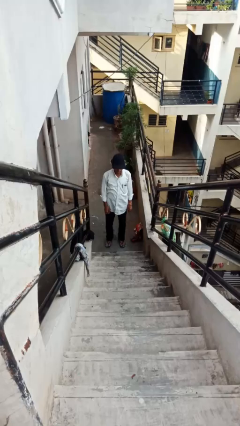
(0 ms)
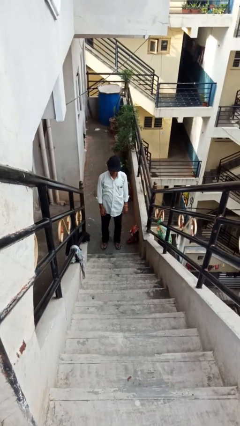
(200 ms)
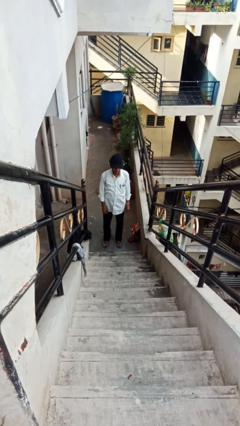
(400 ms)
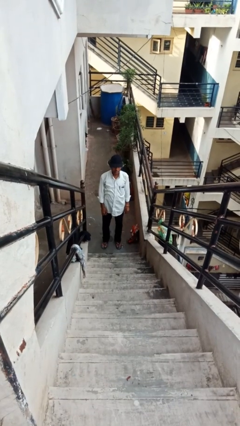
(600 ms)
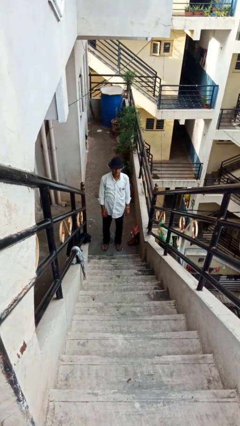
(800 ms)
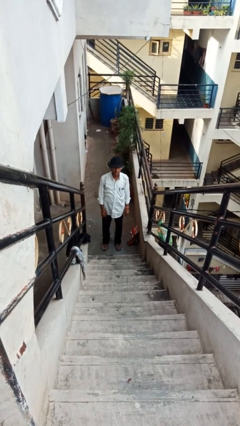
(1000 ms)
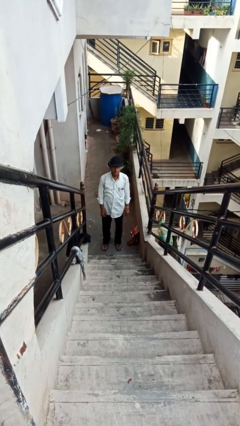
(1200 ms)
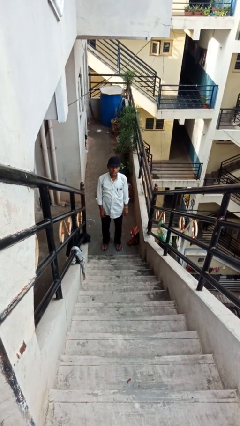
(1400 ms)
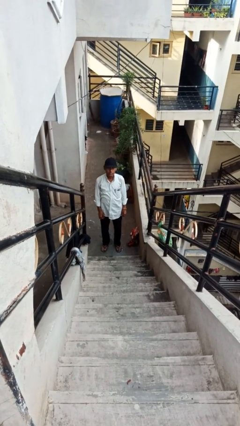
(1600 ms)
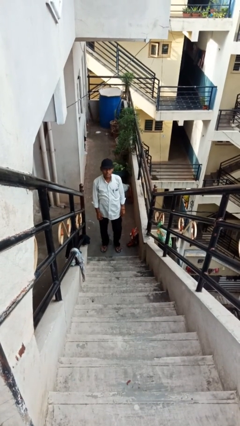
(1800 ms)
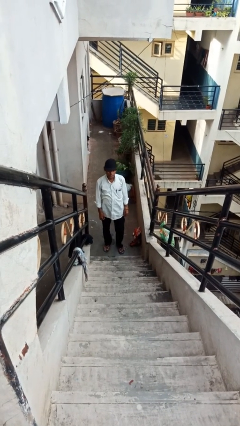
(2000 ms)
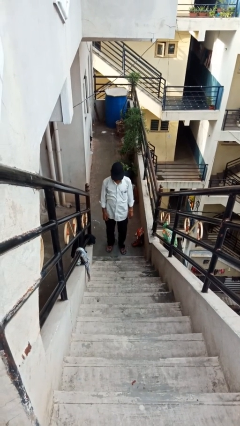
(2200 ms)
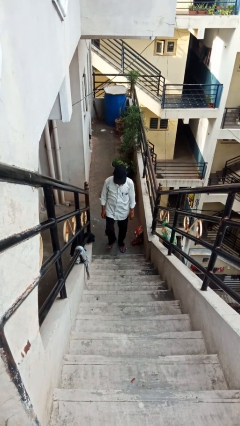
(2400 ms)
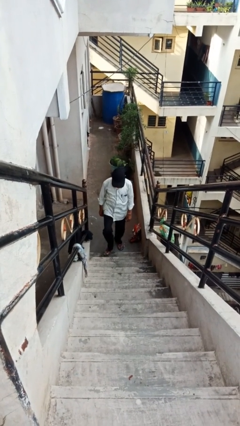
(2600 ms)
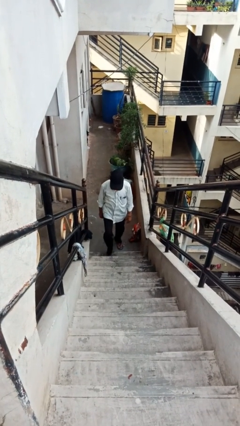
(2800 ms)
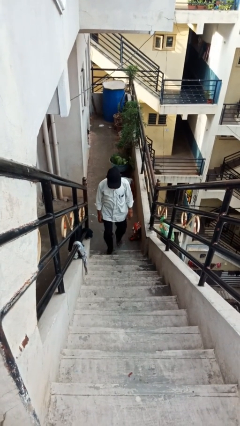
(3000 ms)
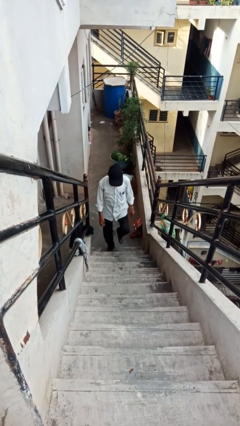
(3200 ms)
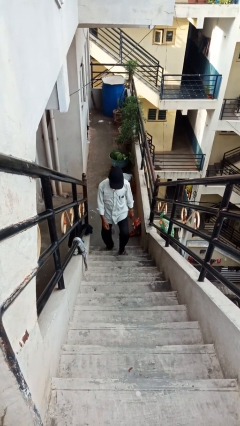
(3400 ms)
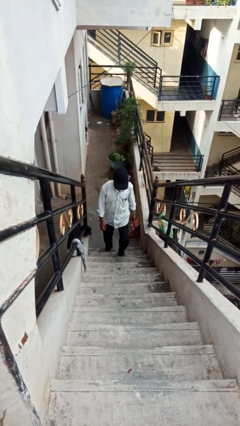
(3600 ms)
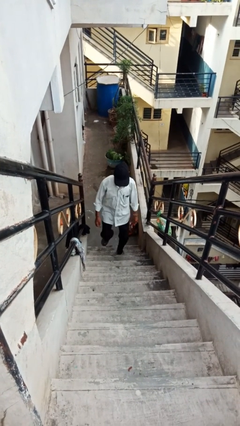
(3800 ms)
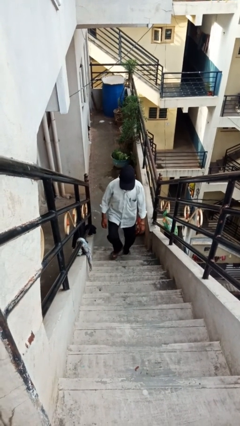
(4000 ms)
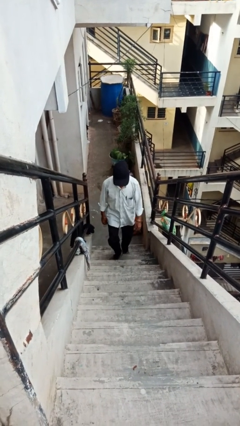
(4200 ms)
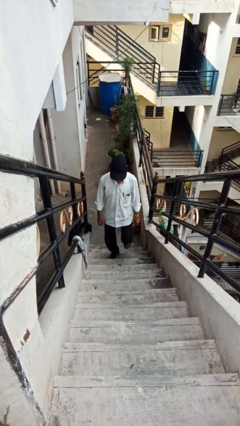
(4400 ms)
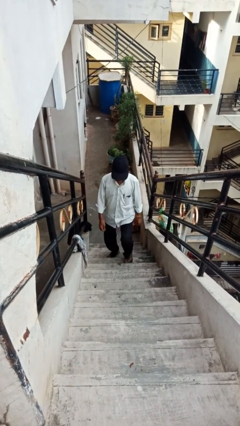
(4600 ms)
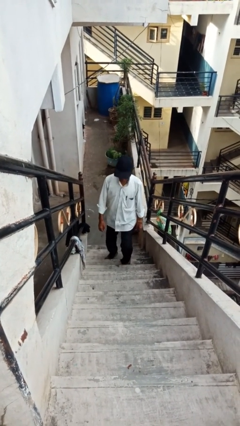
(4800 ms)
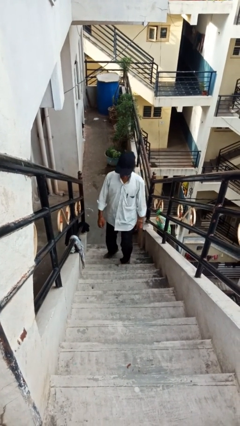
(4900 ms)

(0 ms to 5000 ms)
person climbs up stairs

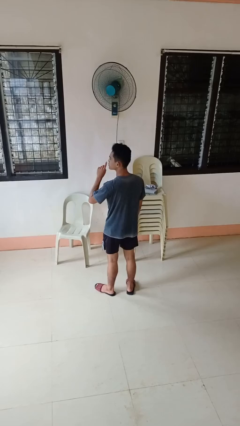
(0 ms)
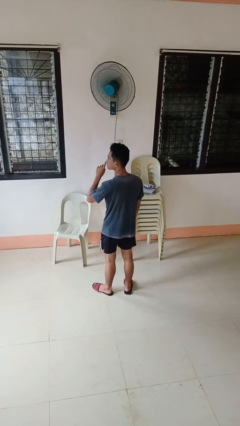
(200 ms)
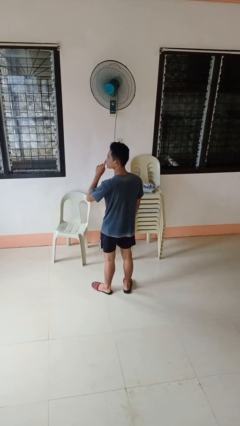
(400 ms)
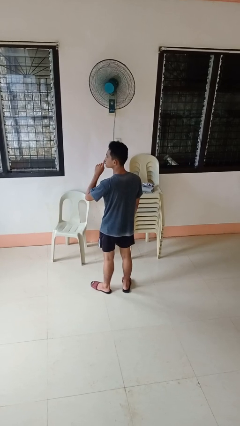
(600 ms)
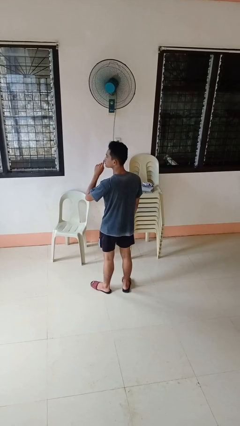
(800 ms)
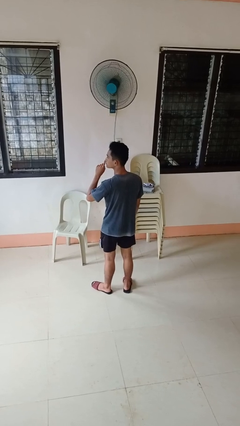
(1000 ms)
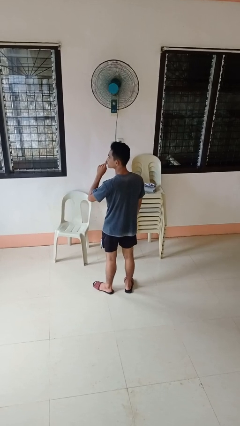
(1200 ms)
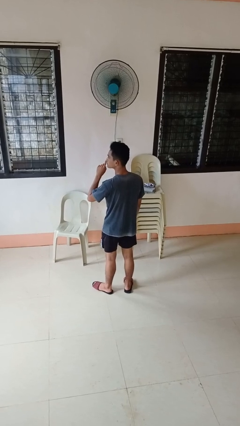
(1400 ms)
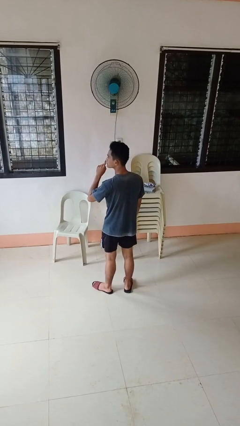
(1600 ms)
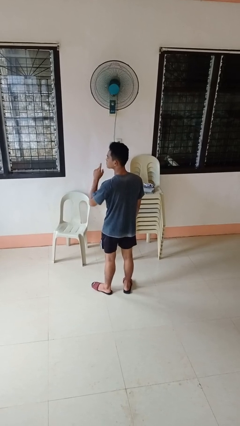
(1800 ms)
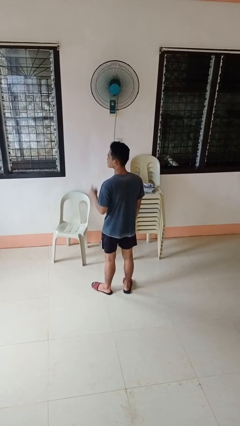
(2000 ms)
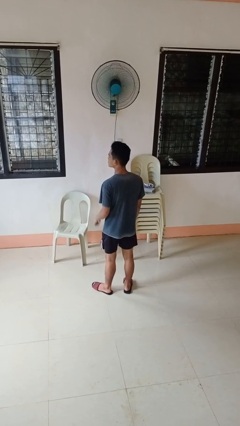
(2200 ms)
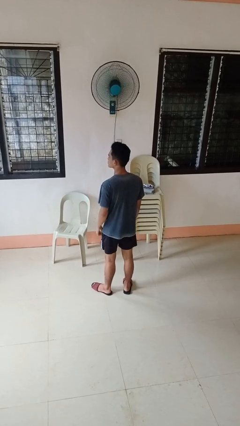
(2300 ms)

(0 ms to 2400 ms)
person gestures be quiet

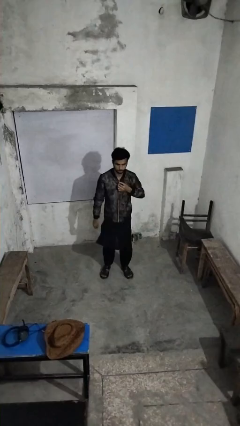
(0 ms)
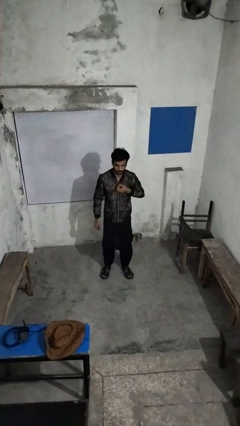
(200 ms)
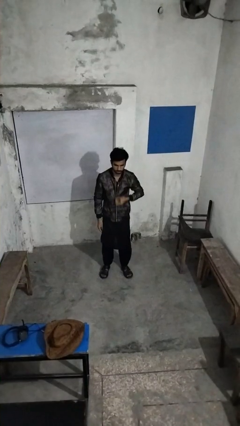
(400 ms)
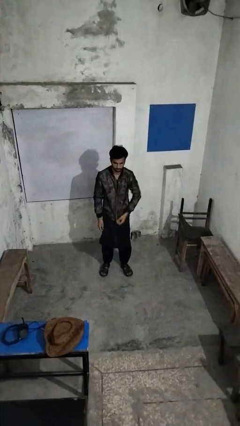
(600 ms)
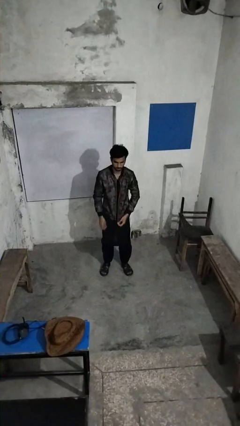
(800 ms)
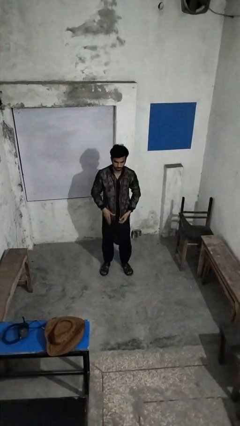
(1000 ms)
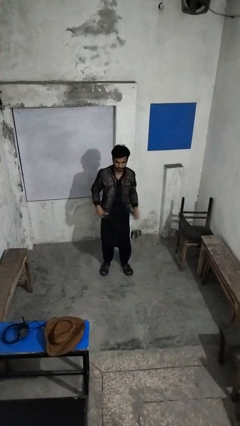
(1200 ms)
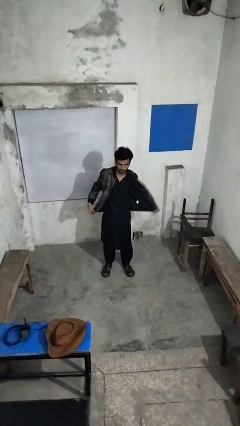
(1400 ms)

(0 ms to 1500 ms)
person unzips jacket

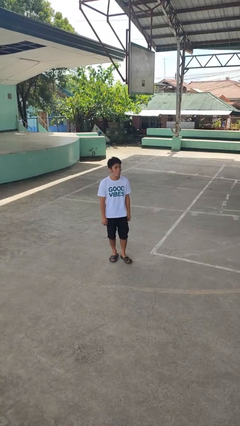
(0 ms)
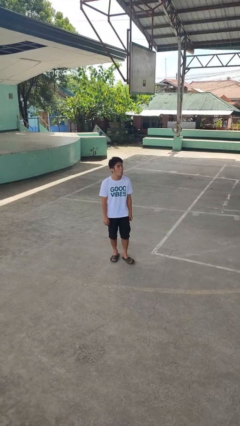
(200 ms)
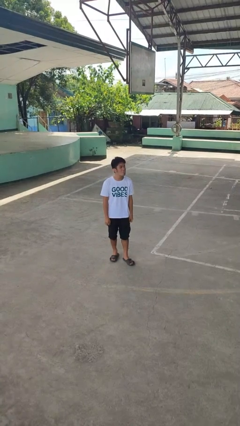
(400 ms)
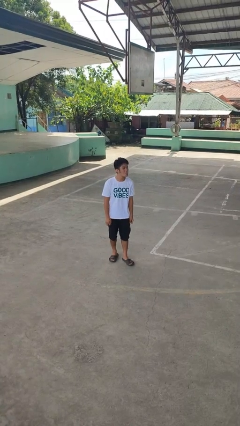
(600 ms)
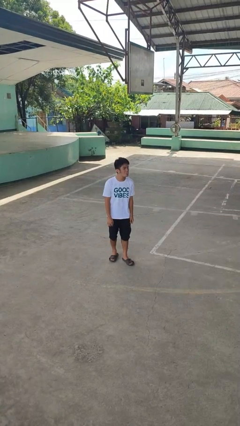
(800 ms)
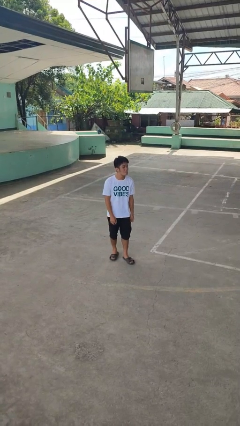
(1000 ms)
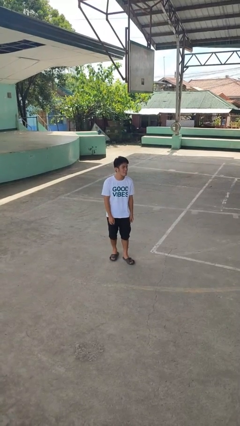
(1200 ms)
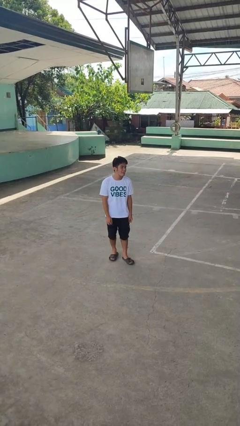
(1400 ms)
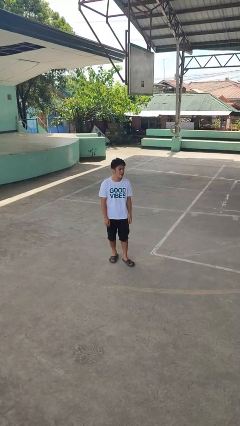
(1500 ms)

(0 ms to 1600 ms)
person sticks out tongue

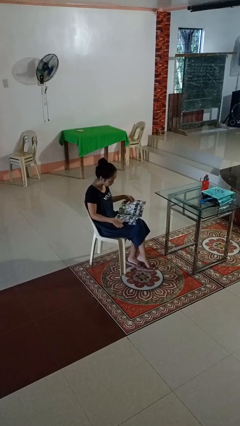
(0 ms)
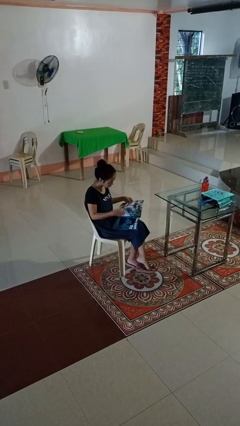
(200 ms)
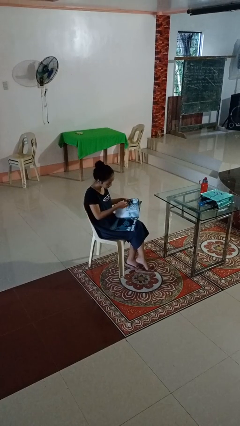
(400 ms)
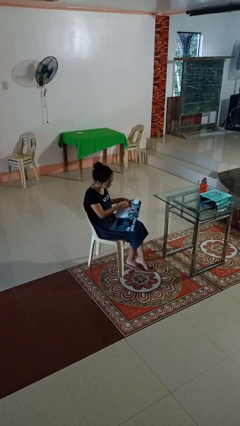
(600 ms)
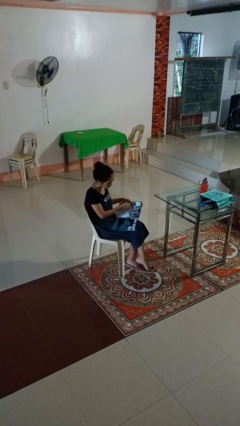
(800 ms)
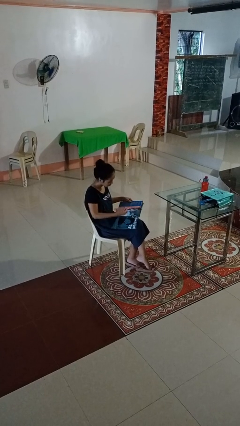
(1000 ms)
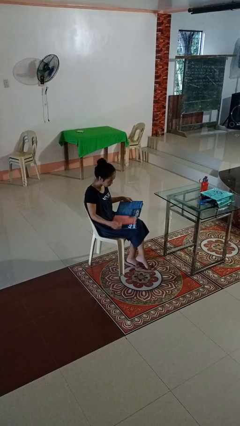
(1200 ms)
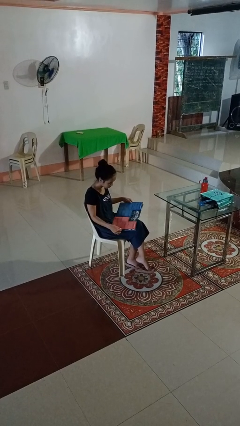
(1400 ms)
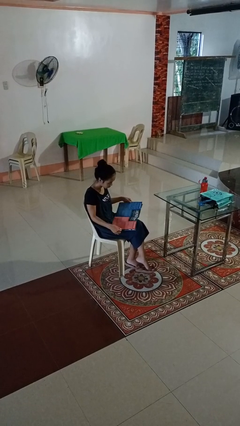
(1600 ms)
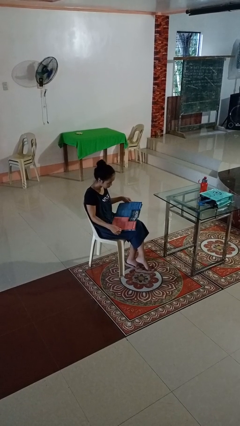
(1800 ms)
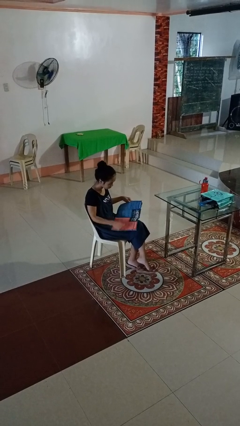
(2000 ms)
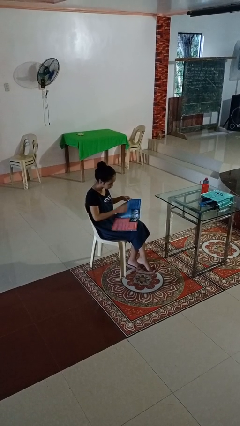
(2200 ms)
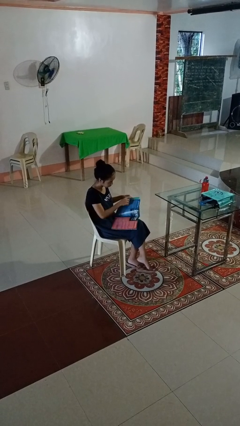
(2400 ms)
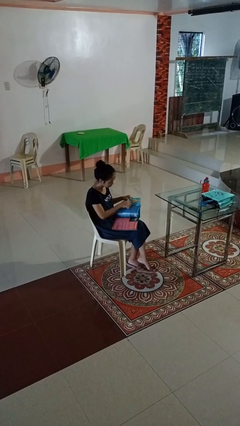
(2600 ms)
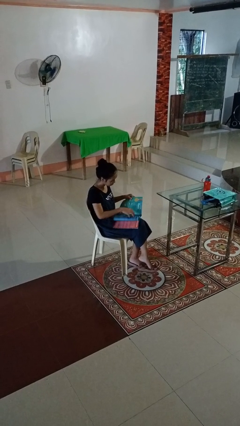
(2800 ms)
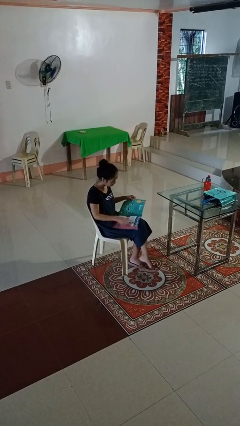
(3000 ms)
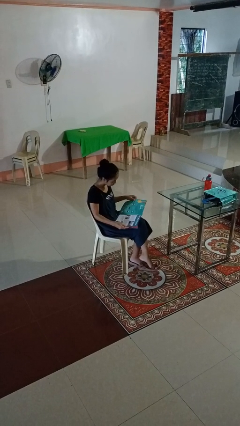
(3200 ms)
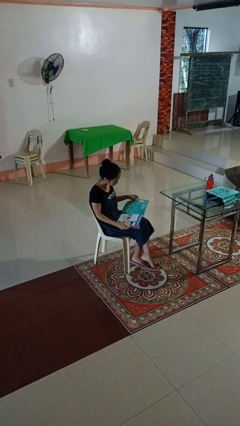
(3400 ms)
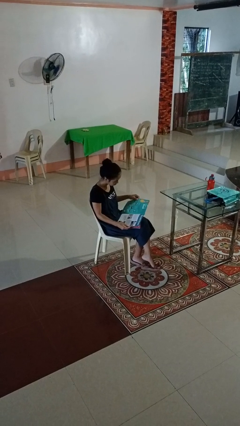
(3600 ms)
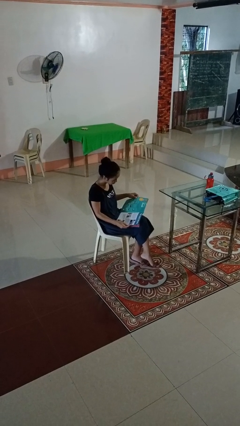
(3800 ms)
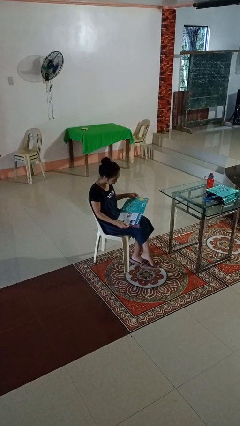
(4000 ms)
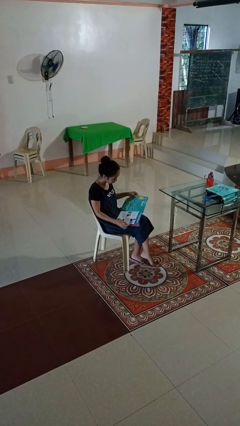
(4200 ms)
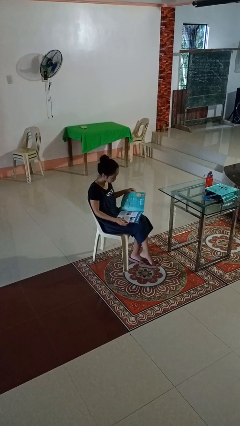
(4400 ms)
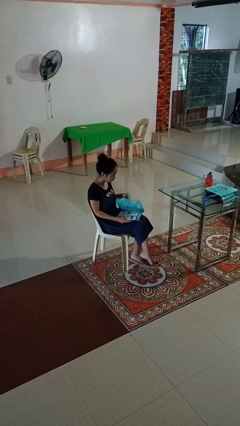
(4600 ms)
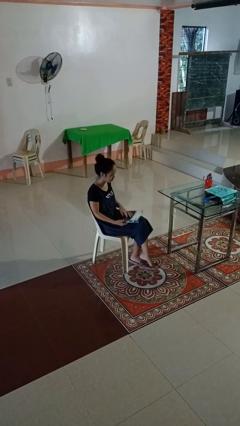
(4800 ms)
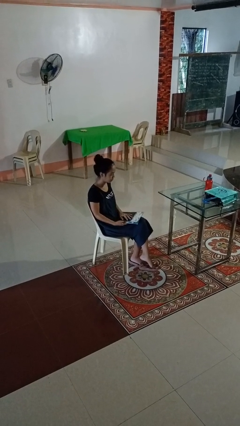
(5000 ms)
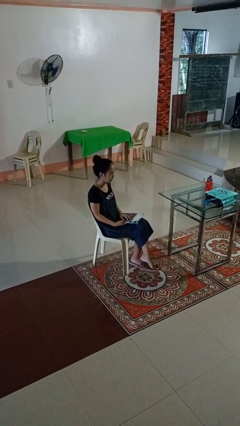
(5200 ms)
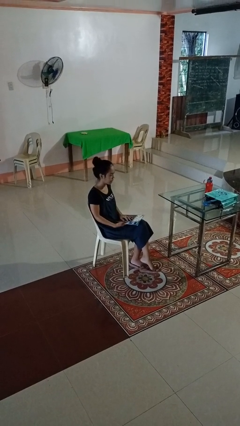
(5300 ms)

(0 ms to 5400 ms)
person reads magazine

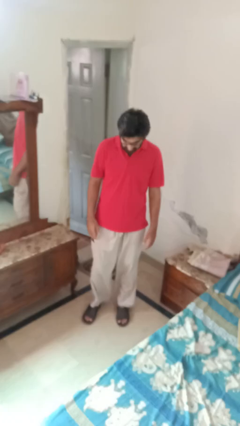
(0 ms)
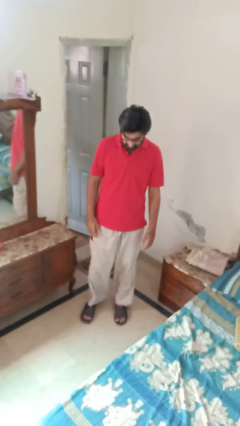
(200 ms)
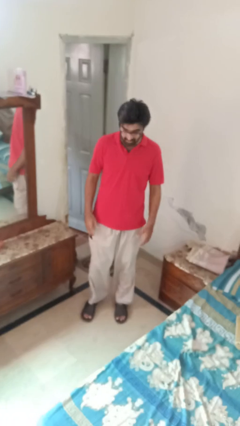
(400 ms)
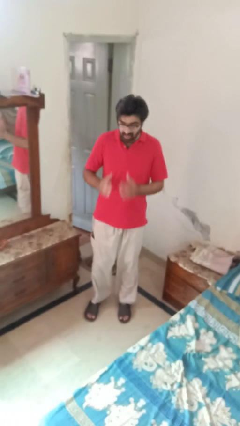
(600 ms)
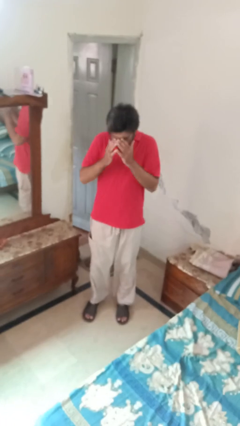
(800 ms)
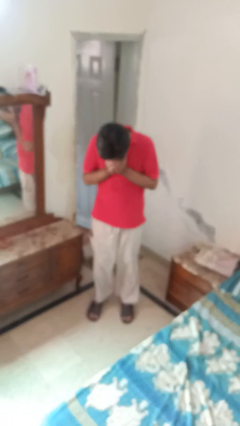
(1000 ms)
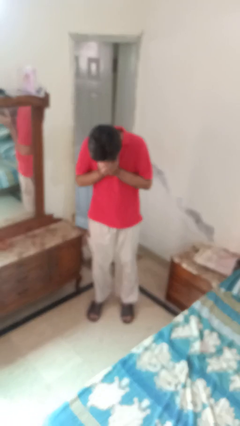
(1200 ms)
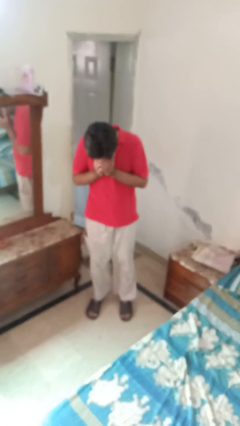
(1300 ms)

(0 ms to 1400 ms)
person sneezes into hand

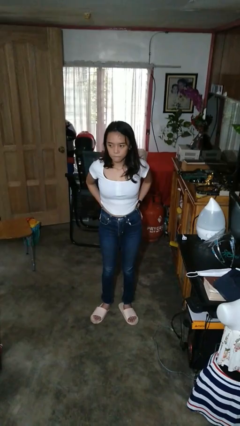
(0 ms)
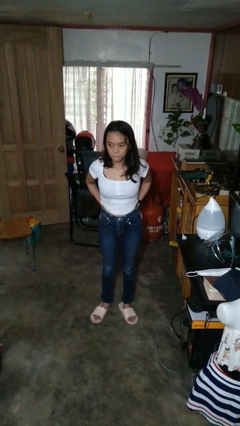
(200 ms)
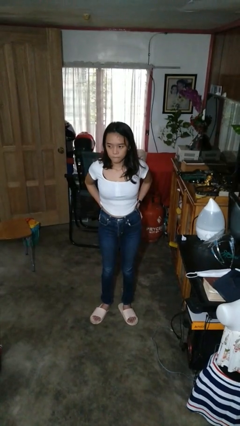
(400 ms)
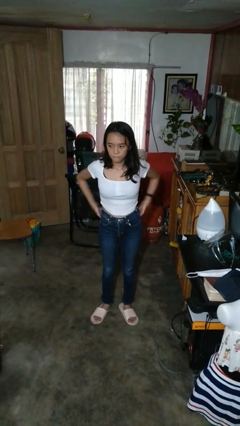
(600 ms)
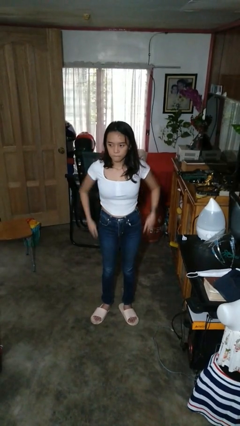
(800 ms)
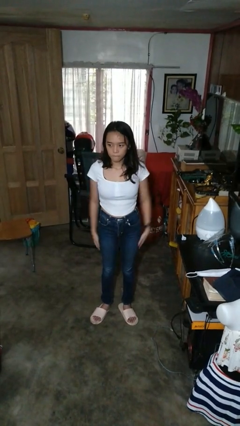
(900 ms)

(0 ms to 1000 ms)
person puts hands in back pockets
